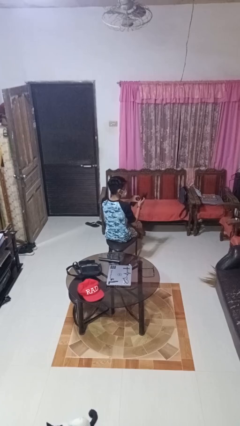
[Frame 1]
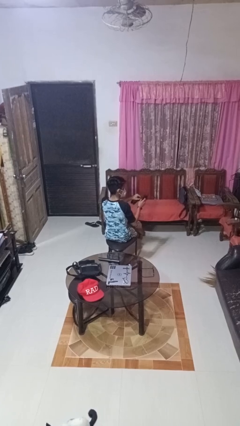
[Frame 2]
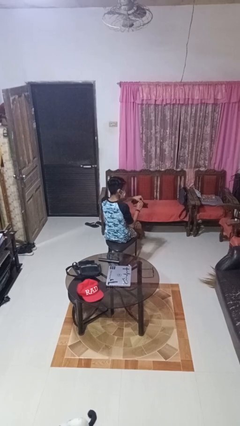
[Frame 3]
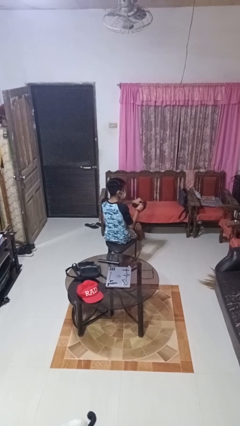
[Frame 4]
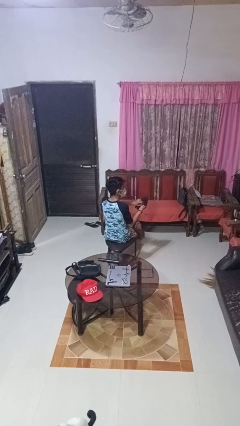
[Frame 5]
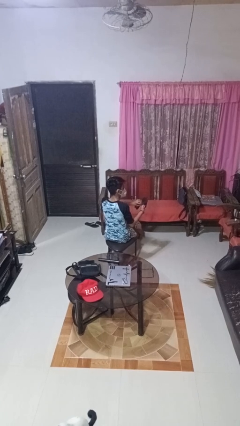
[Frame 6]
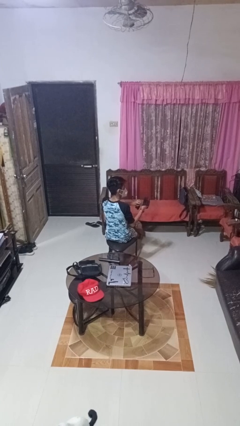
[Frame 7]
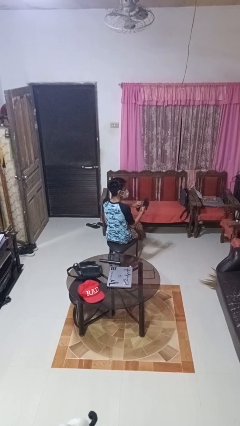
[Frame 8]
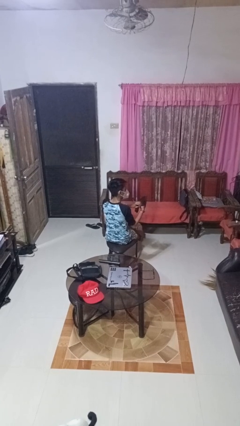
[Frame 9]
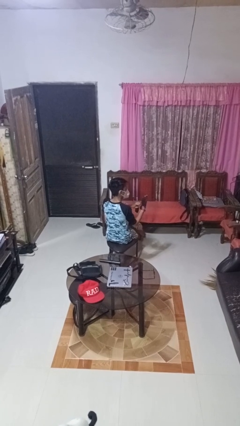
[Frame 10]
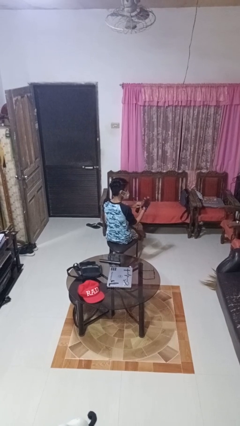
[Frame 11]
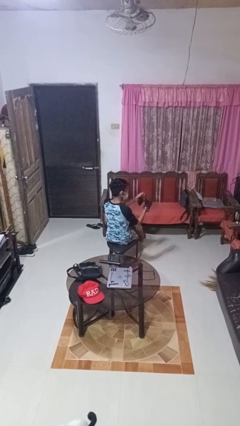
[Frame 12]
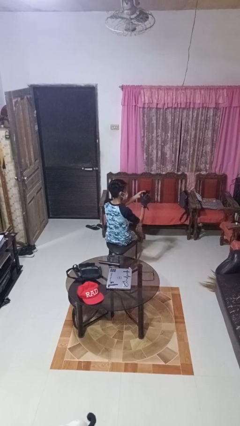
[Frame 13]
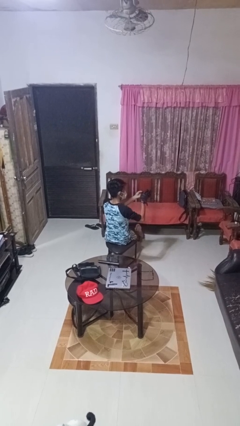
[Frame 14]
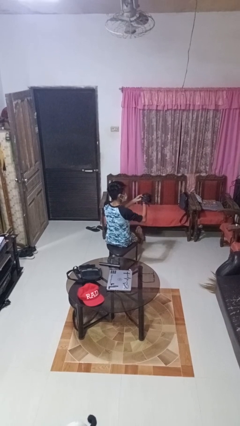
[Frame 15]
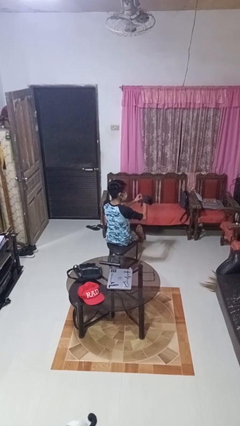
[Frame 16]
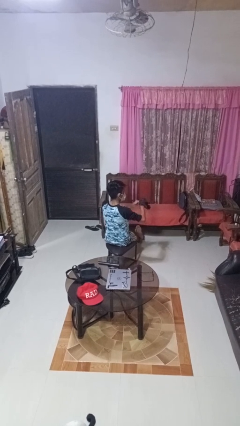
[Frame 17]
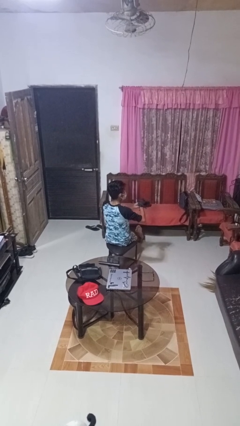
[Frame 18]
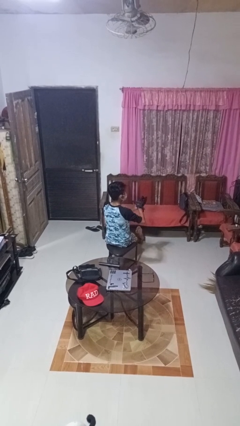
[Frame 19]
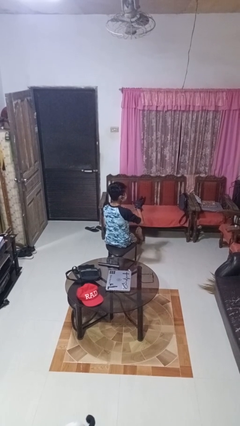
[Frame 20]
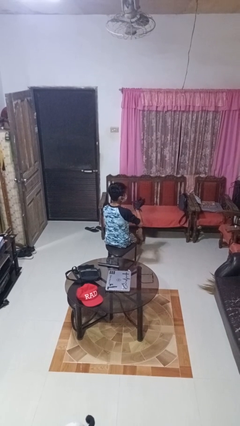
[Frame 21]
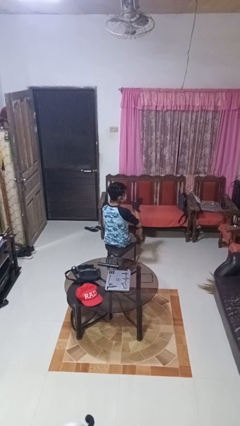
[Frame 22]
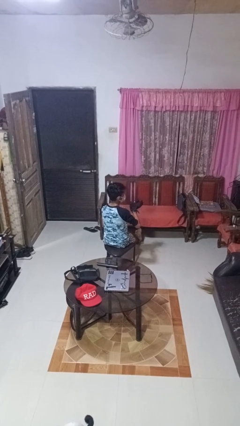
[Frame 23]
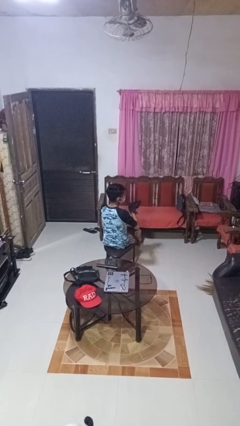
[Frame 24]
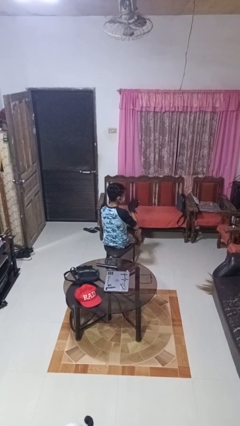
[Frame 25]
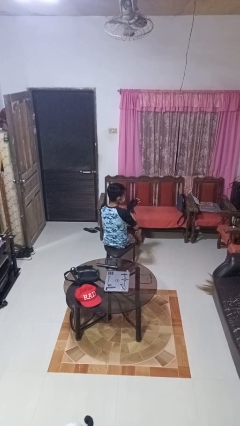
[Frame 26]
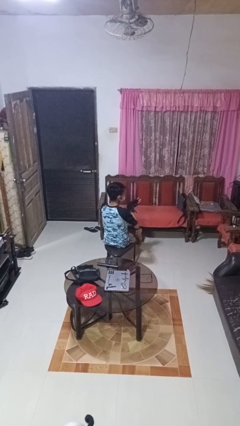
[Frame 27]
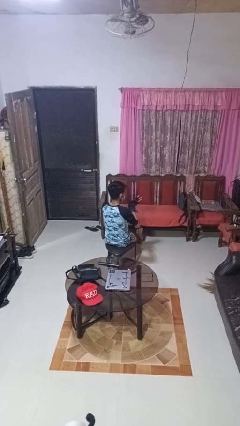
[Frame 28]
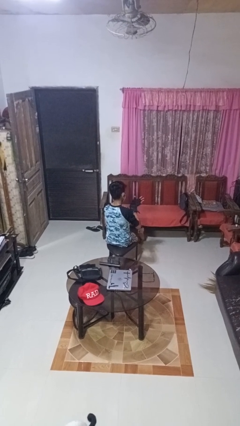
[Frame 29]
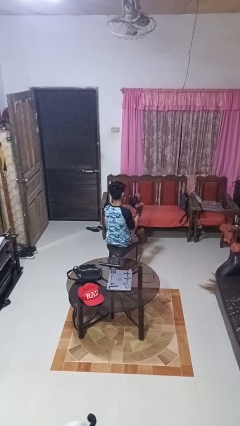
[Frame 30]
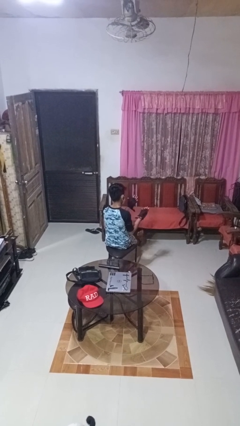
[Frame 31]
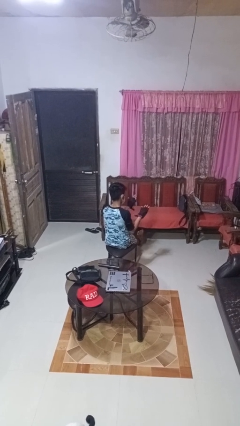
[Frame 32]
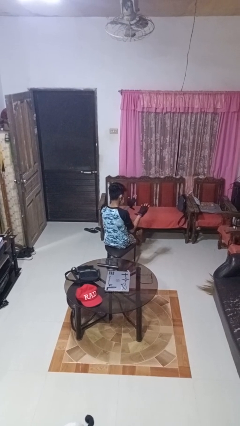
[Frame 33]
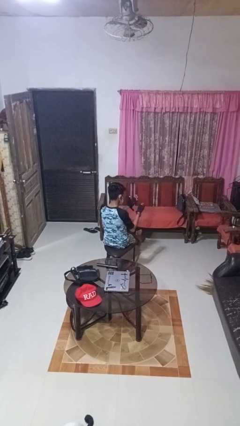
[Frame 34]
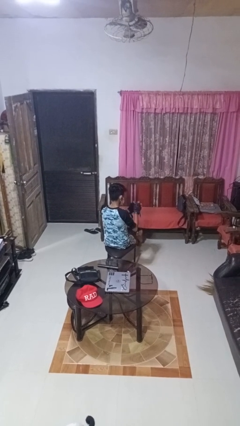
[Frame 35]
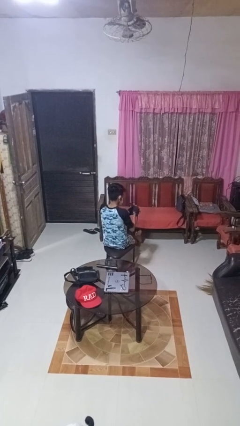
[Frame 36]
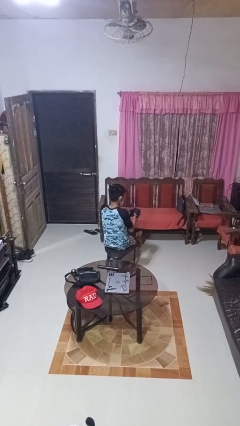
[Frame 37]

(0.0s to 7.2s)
person puts on gloves

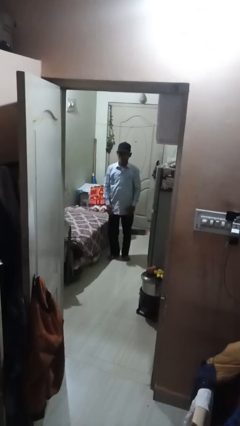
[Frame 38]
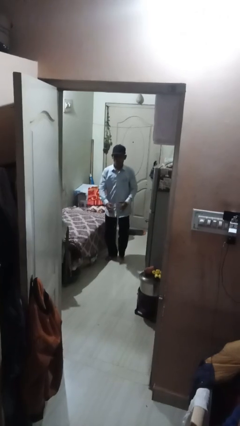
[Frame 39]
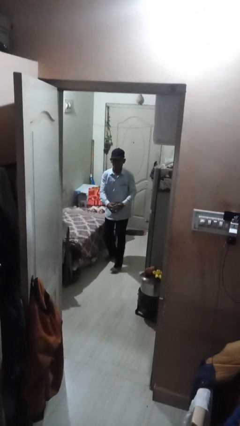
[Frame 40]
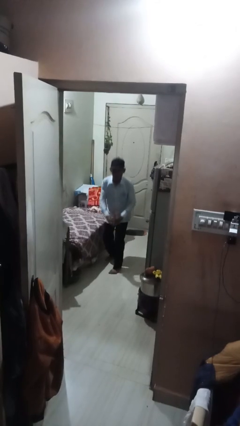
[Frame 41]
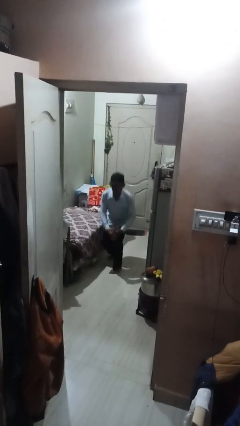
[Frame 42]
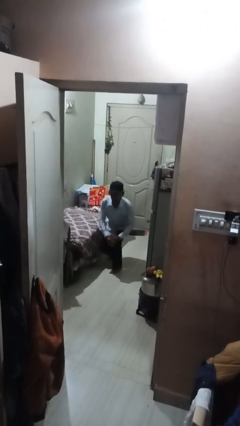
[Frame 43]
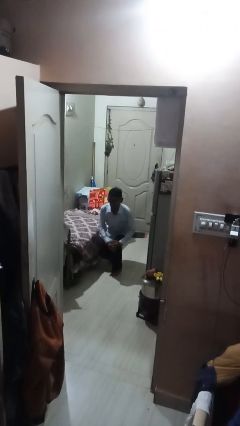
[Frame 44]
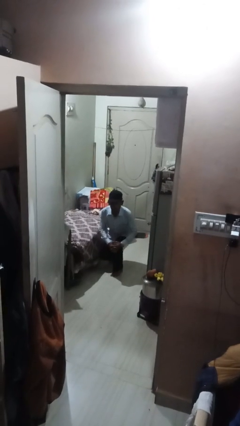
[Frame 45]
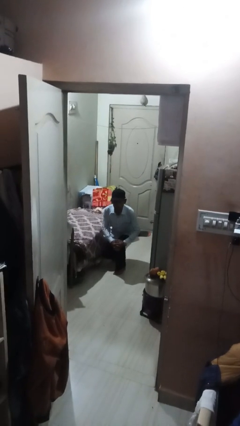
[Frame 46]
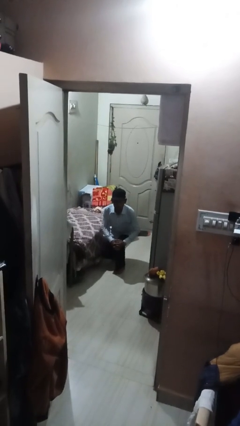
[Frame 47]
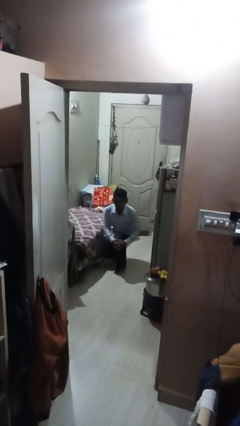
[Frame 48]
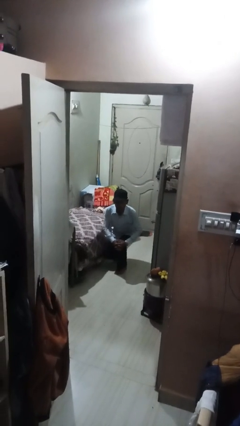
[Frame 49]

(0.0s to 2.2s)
person exercises with lunges

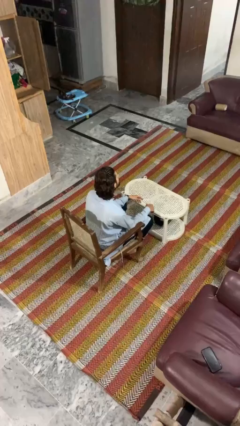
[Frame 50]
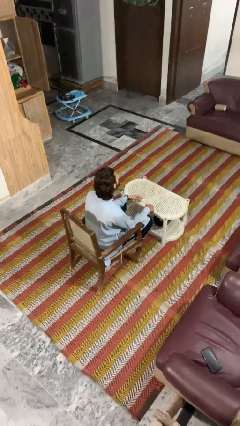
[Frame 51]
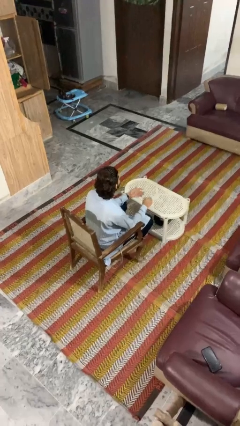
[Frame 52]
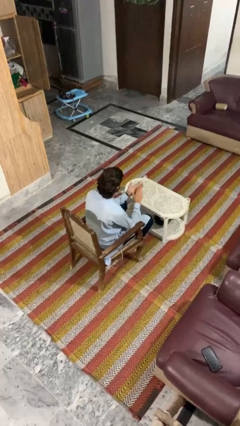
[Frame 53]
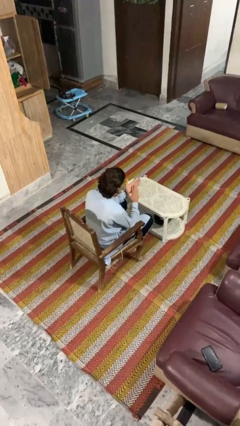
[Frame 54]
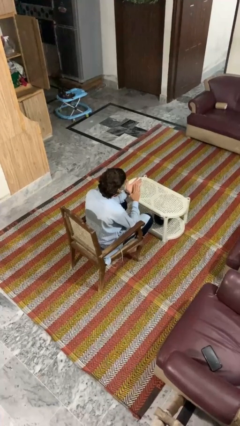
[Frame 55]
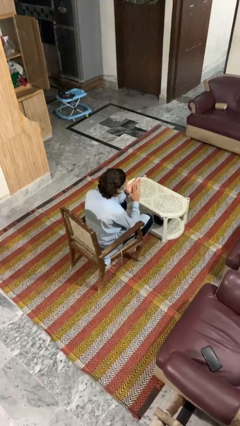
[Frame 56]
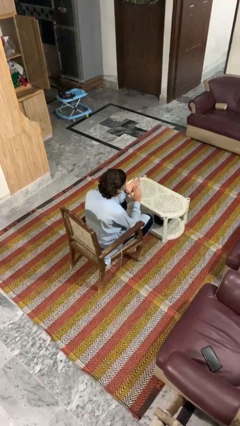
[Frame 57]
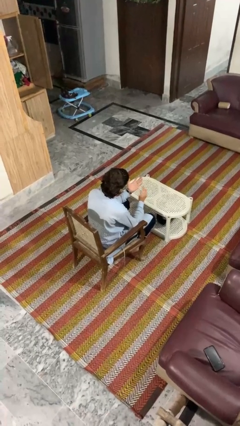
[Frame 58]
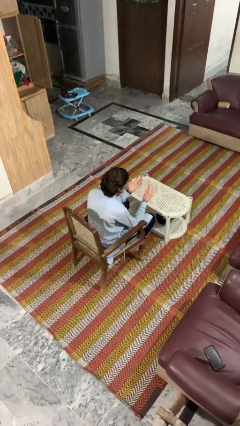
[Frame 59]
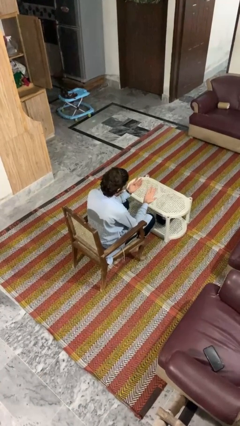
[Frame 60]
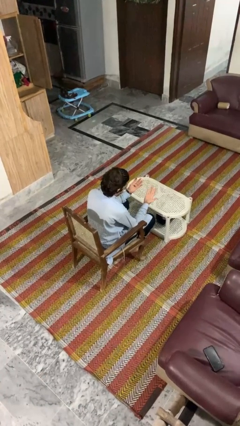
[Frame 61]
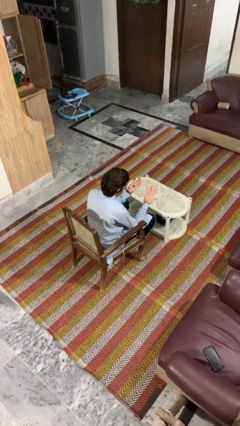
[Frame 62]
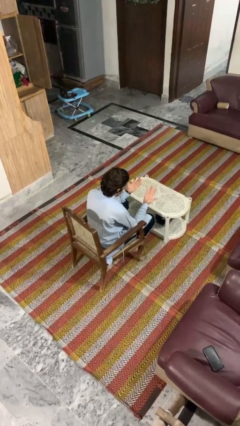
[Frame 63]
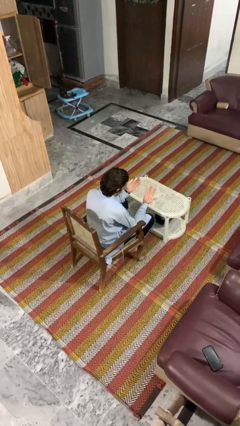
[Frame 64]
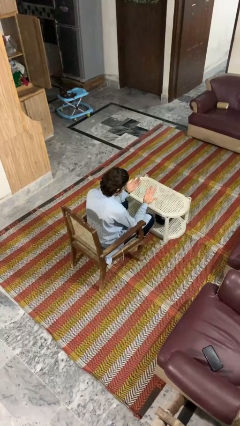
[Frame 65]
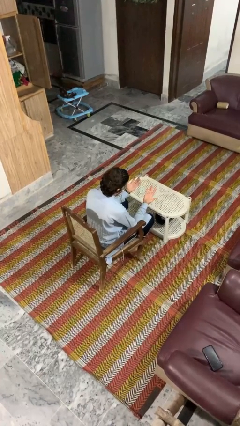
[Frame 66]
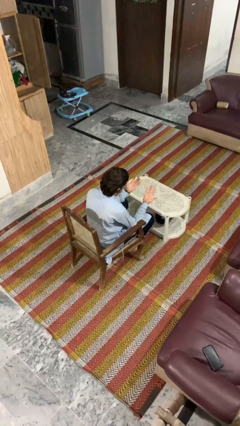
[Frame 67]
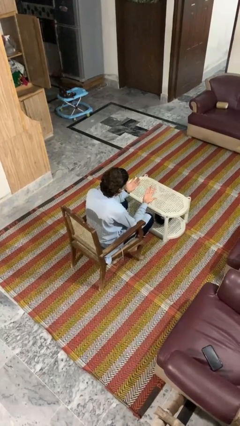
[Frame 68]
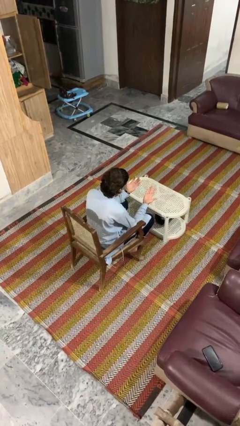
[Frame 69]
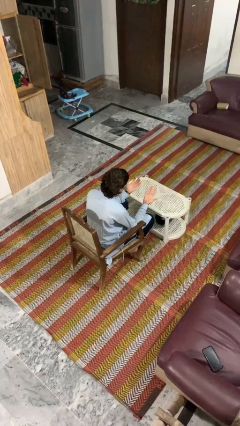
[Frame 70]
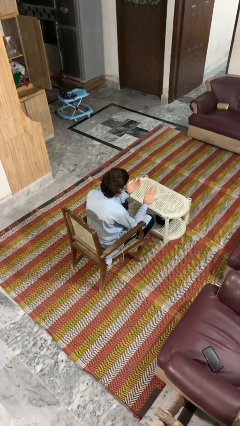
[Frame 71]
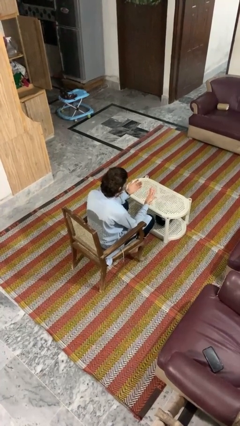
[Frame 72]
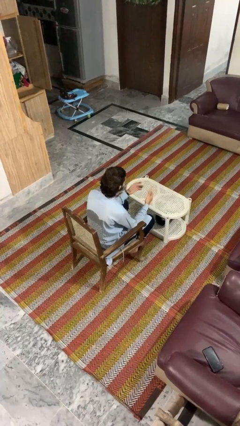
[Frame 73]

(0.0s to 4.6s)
person looks at hands in lap

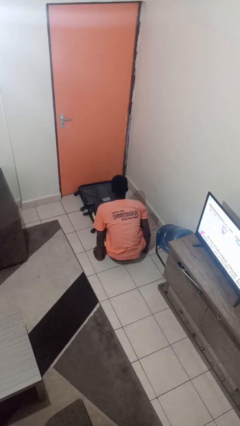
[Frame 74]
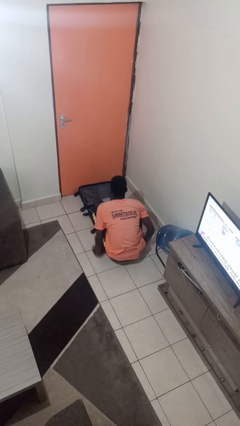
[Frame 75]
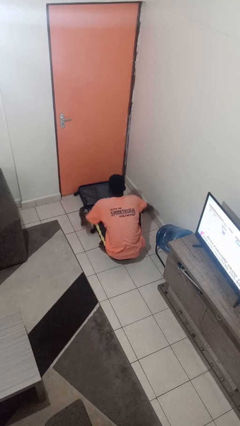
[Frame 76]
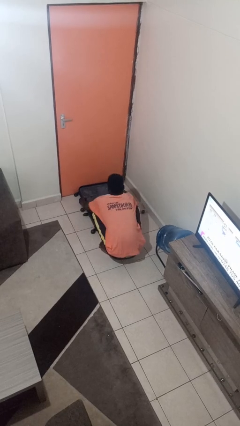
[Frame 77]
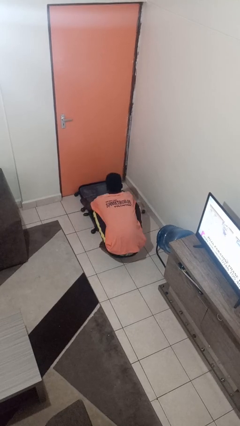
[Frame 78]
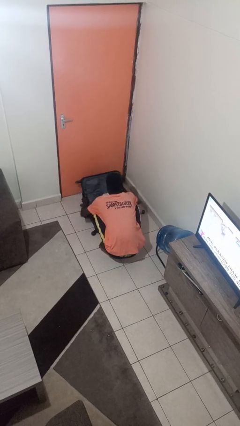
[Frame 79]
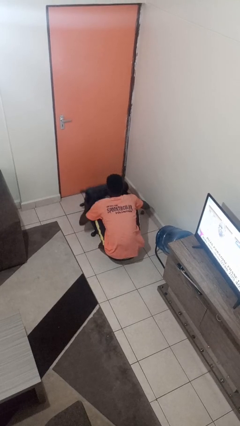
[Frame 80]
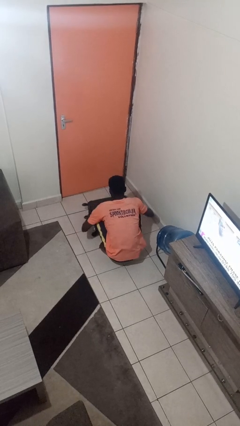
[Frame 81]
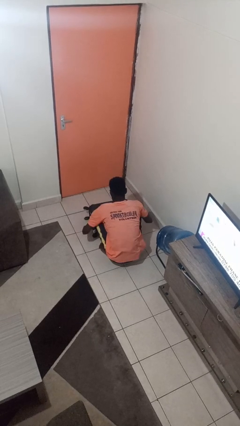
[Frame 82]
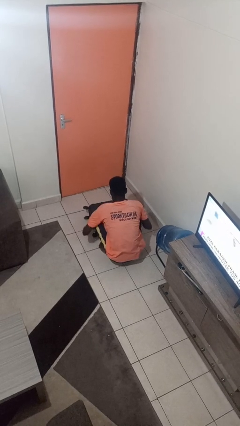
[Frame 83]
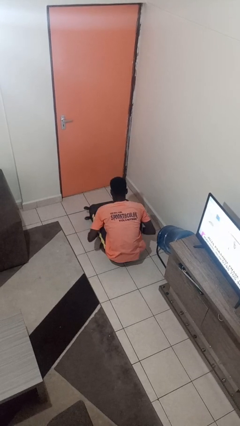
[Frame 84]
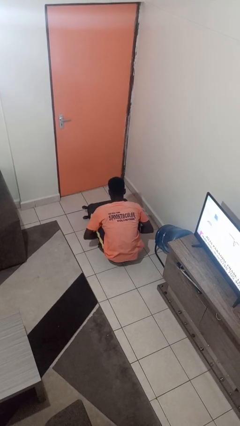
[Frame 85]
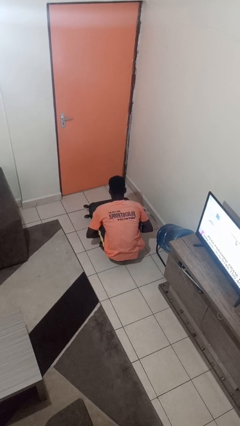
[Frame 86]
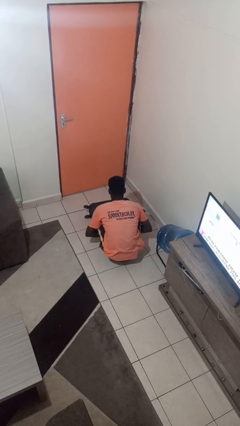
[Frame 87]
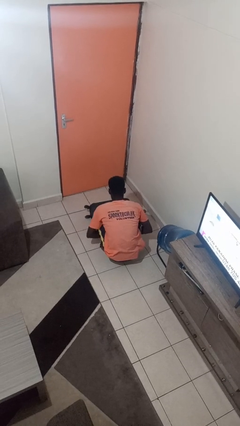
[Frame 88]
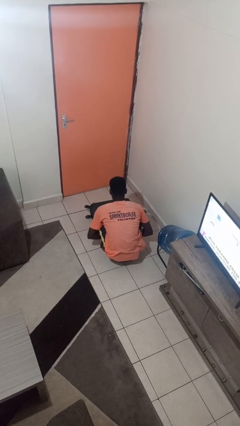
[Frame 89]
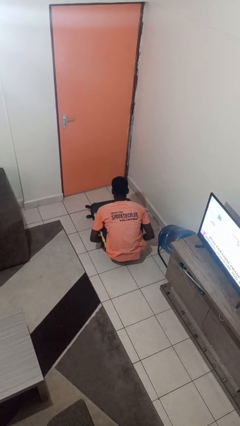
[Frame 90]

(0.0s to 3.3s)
person closes suitcase

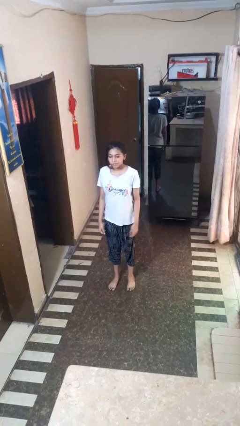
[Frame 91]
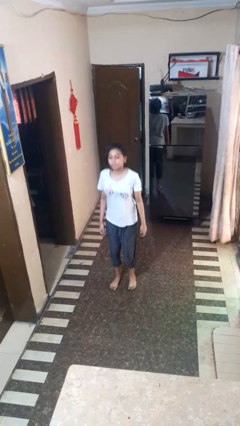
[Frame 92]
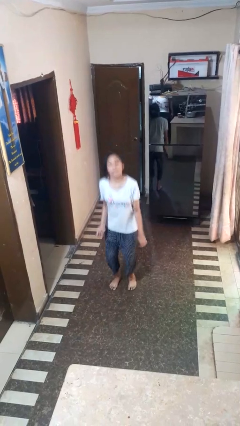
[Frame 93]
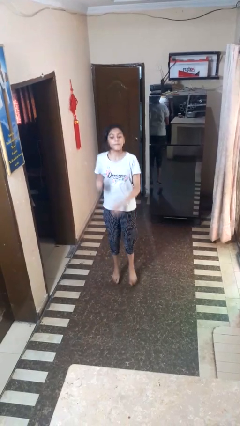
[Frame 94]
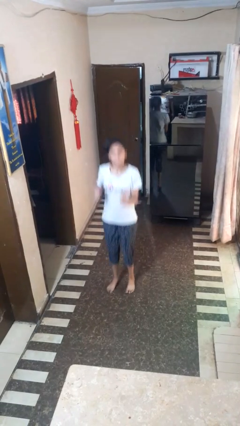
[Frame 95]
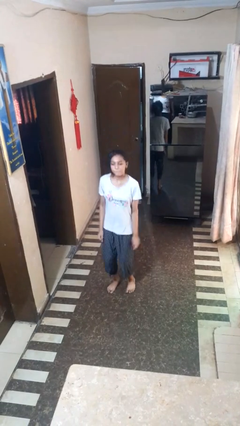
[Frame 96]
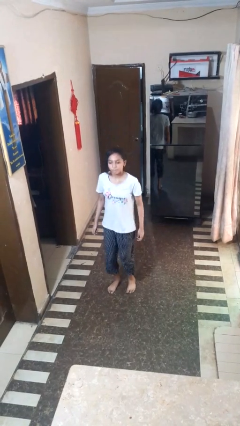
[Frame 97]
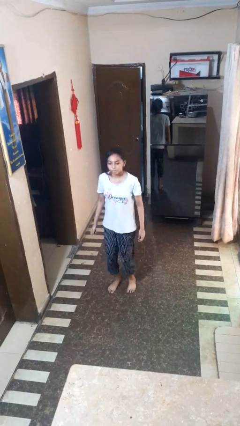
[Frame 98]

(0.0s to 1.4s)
person jumps
